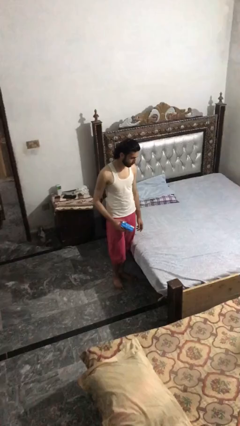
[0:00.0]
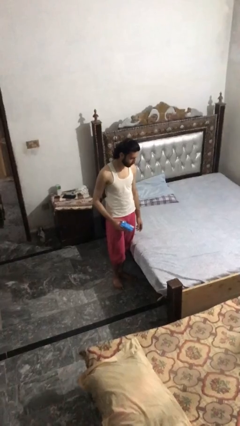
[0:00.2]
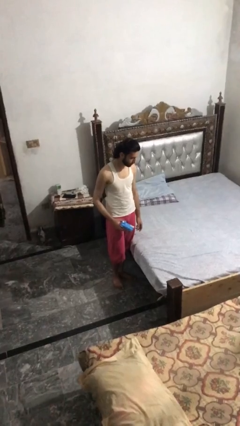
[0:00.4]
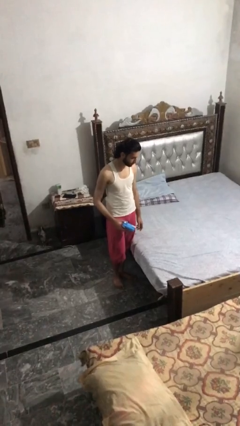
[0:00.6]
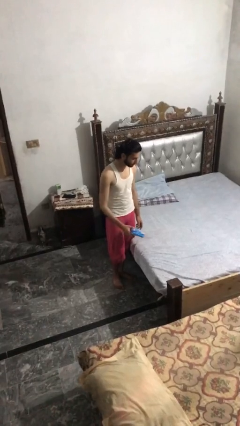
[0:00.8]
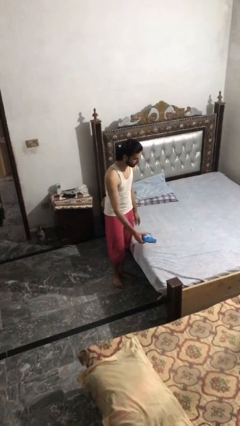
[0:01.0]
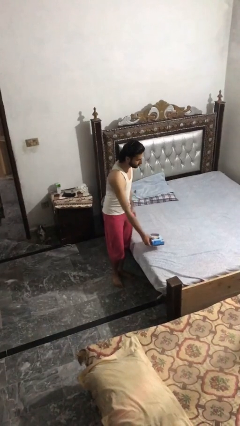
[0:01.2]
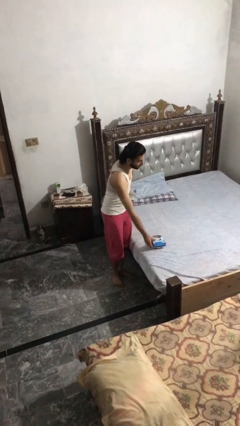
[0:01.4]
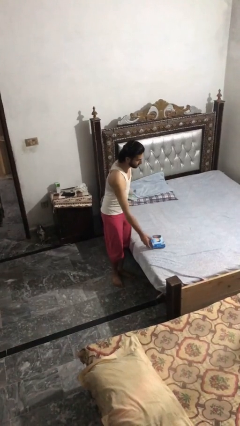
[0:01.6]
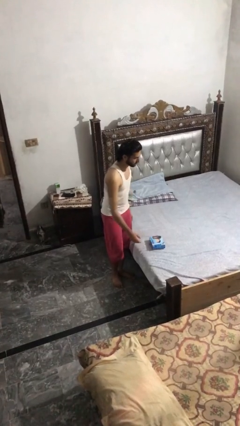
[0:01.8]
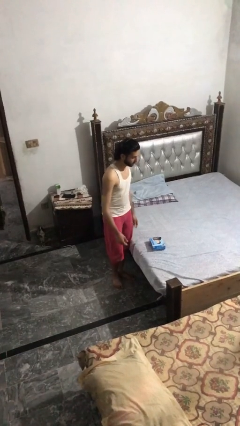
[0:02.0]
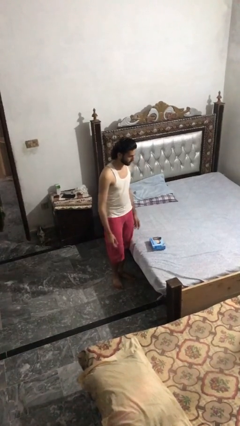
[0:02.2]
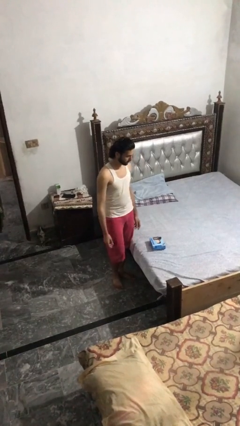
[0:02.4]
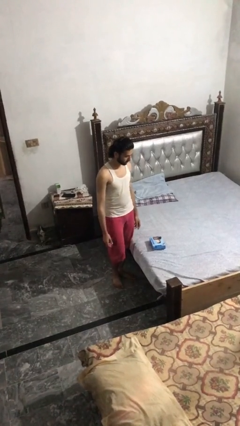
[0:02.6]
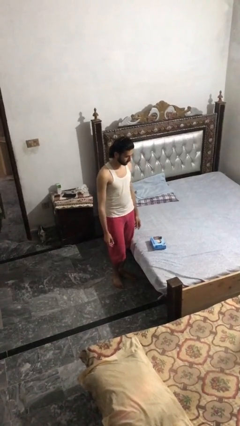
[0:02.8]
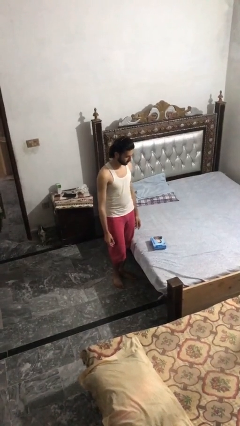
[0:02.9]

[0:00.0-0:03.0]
person puts down object on bed

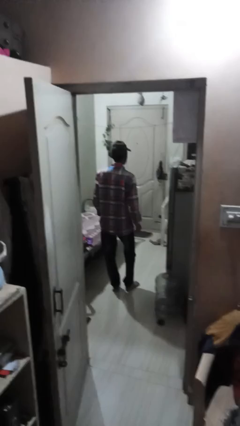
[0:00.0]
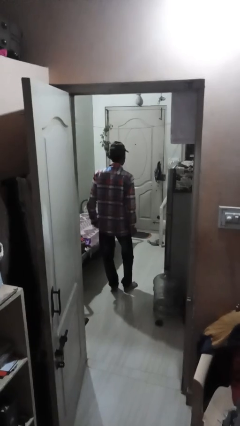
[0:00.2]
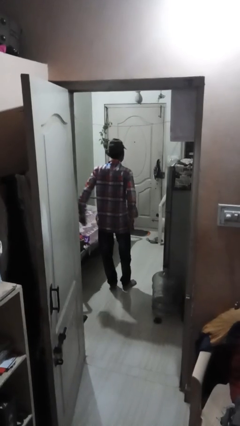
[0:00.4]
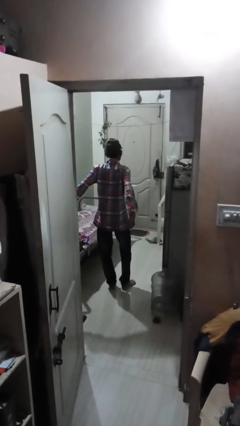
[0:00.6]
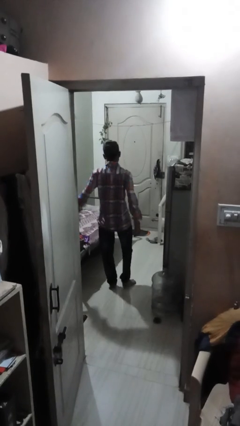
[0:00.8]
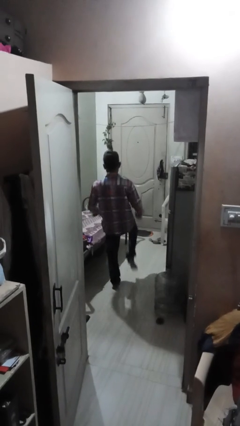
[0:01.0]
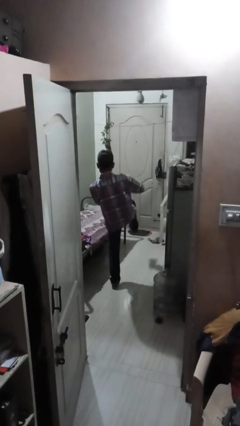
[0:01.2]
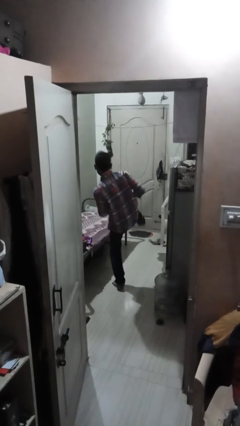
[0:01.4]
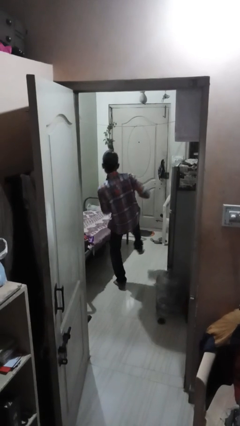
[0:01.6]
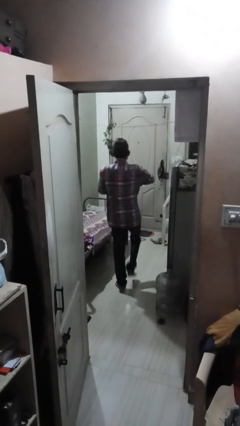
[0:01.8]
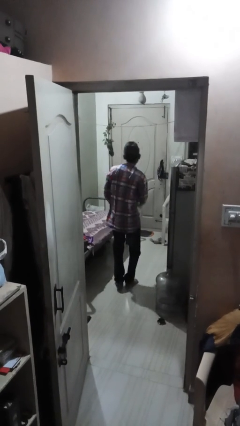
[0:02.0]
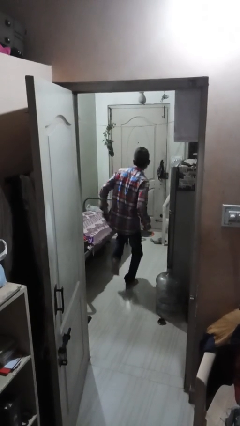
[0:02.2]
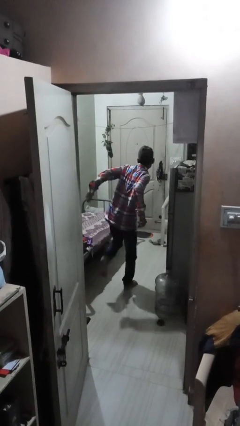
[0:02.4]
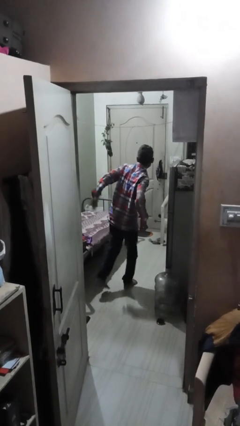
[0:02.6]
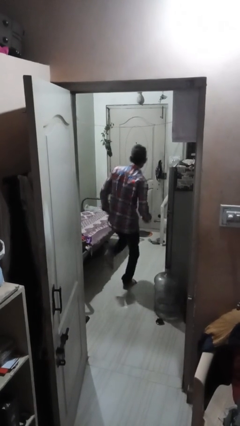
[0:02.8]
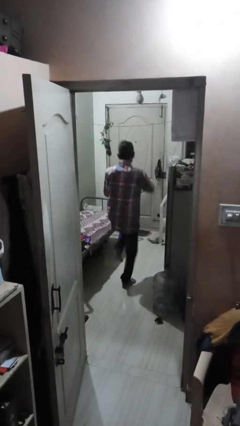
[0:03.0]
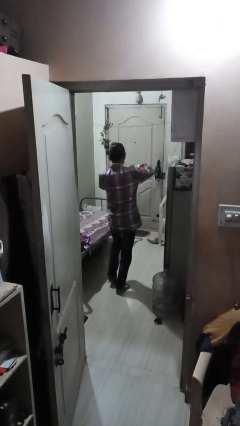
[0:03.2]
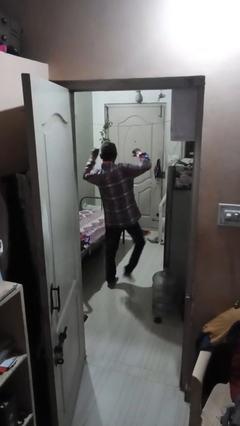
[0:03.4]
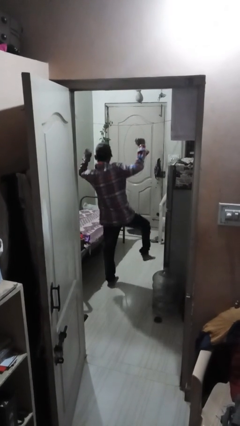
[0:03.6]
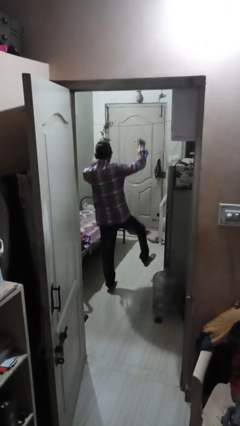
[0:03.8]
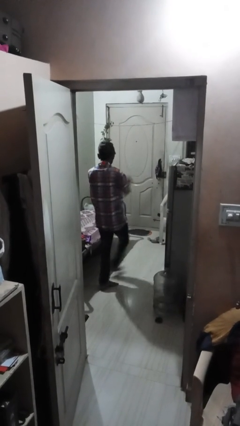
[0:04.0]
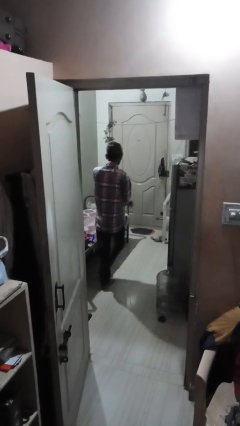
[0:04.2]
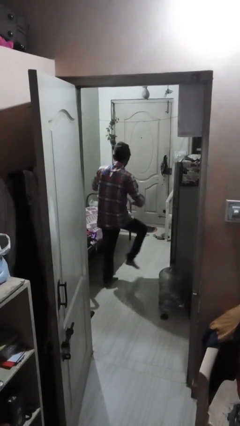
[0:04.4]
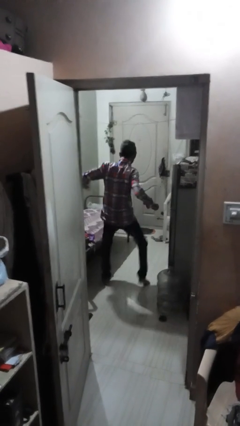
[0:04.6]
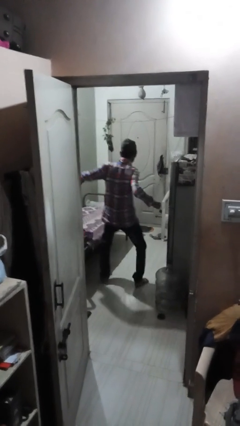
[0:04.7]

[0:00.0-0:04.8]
person dances in place

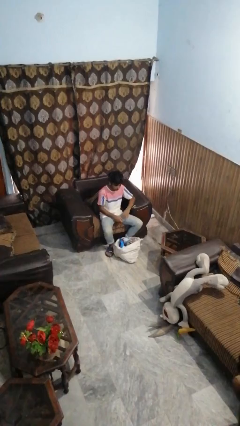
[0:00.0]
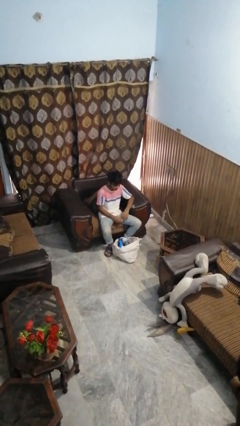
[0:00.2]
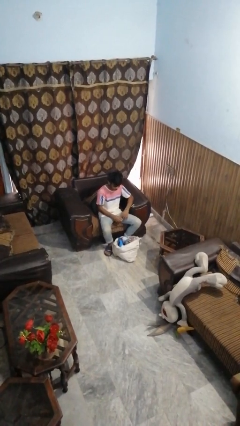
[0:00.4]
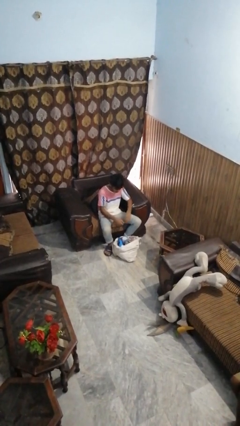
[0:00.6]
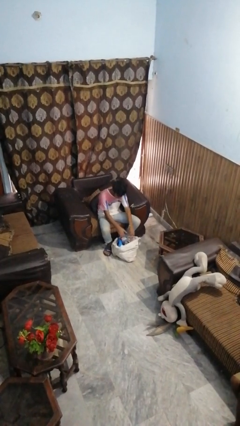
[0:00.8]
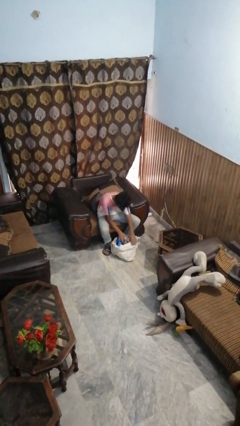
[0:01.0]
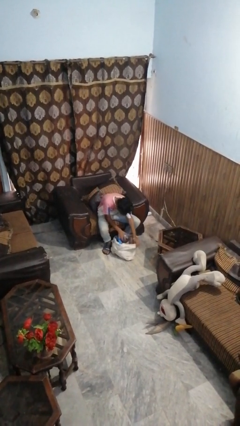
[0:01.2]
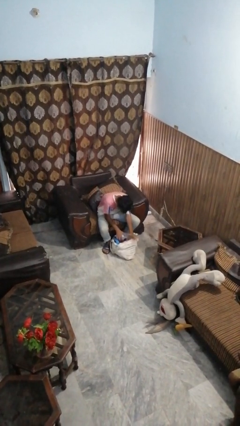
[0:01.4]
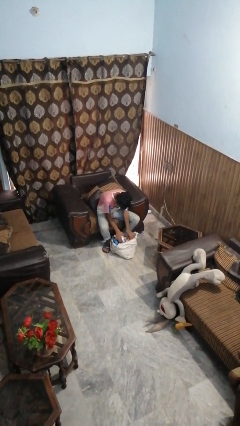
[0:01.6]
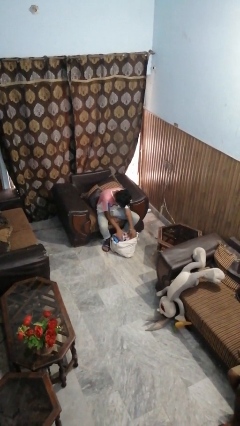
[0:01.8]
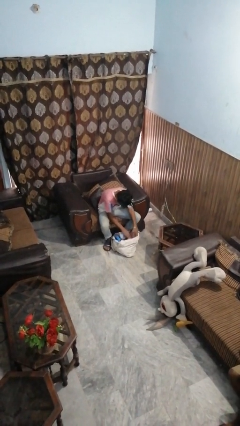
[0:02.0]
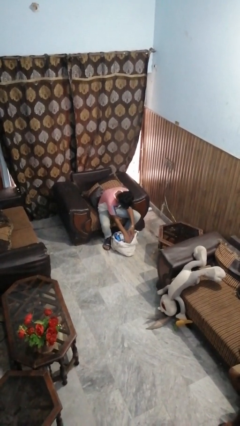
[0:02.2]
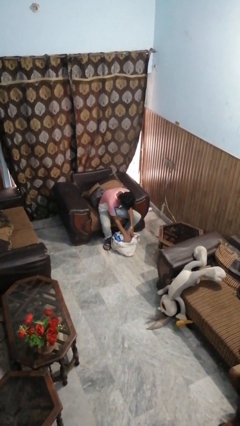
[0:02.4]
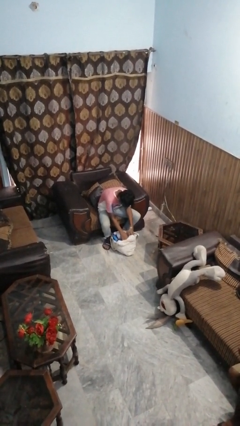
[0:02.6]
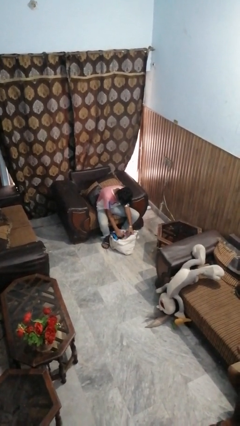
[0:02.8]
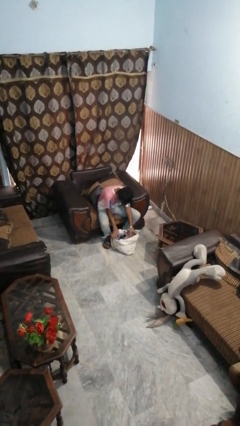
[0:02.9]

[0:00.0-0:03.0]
person searches in bag

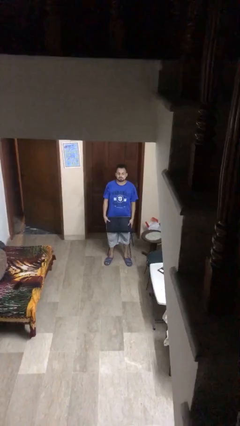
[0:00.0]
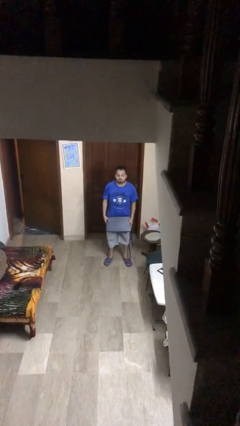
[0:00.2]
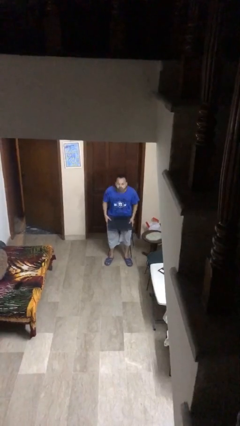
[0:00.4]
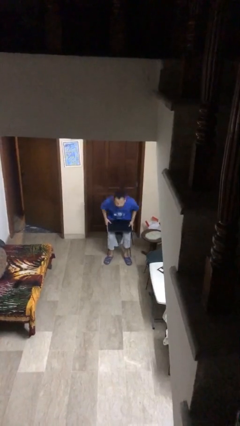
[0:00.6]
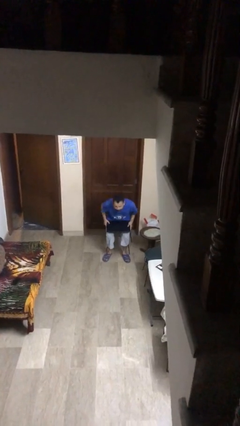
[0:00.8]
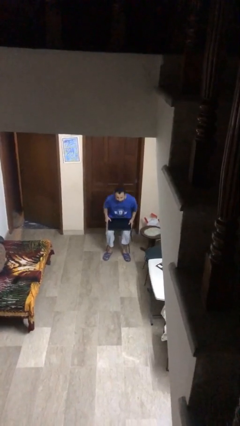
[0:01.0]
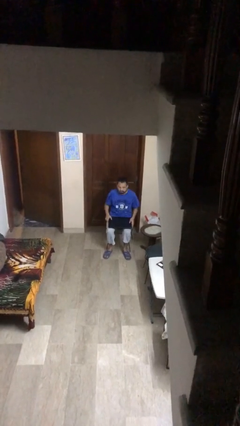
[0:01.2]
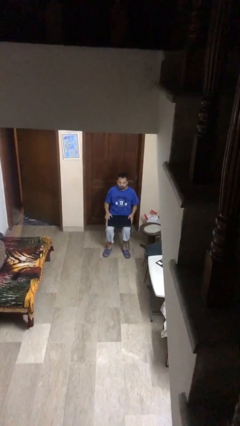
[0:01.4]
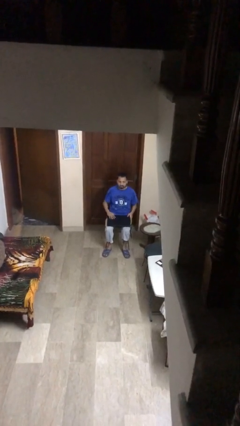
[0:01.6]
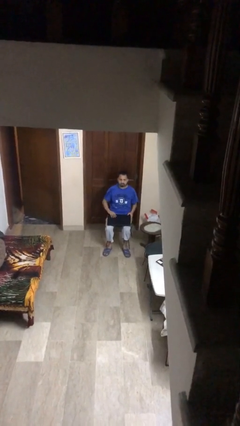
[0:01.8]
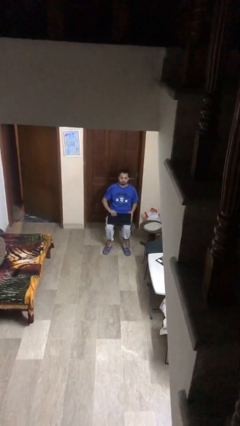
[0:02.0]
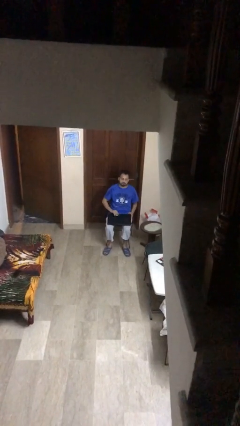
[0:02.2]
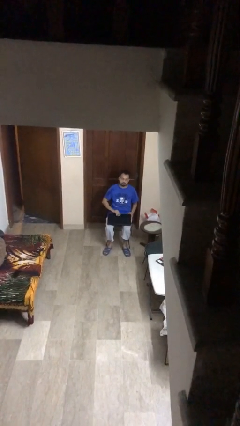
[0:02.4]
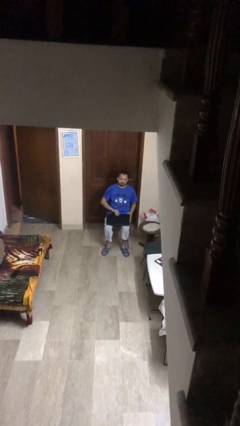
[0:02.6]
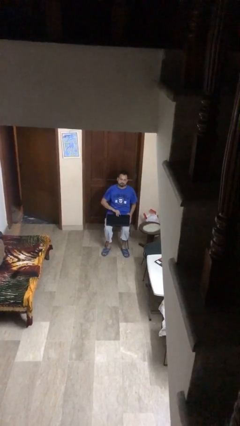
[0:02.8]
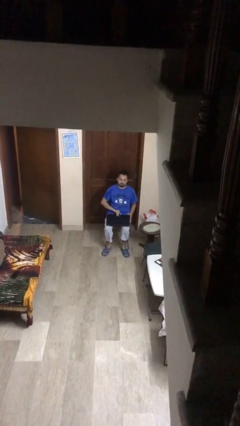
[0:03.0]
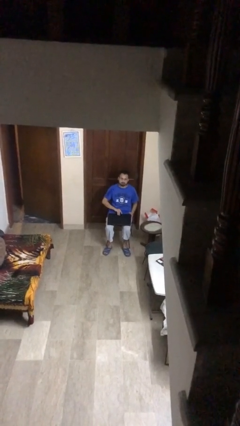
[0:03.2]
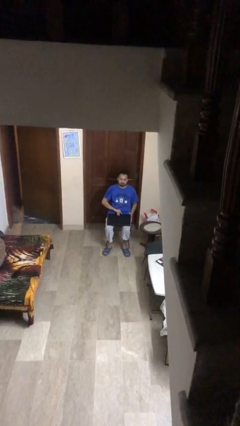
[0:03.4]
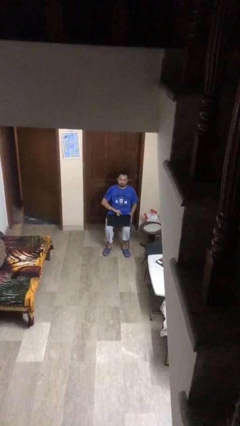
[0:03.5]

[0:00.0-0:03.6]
person sits down

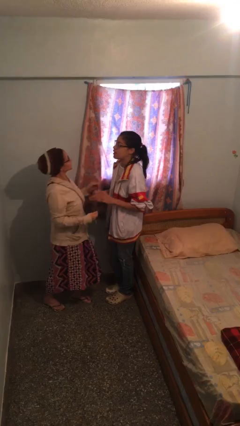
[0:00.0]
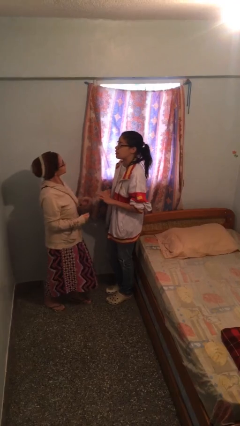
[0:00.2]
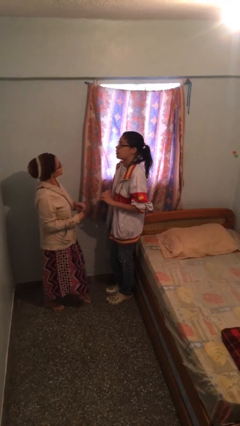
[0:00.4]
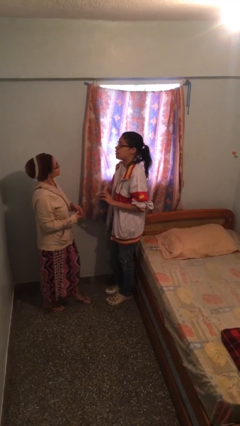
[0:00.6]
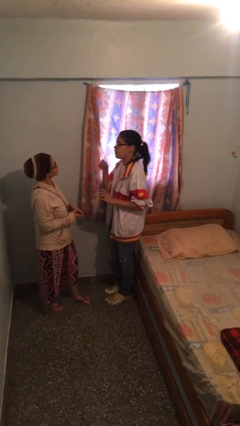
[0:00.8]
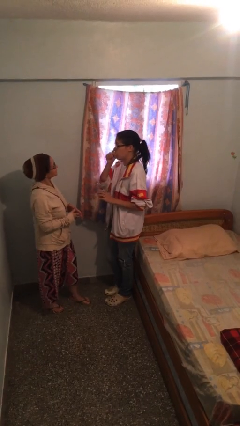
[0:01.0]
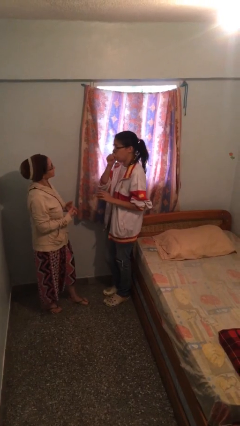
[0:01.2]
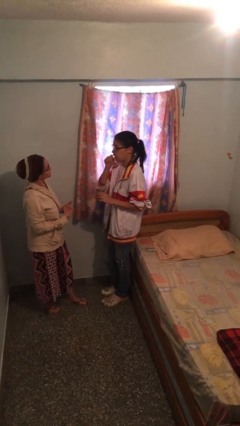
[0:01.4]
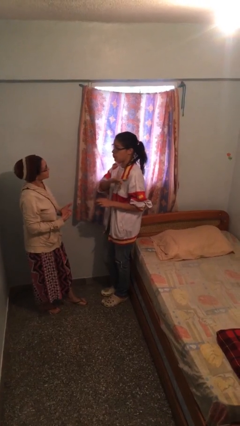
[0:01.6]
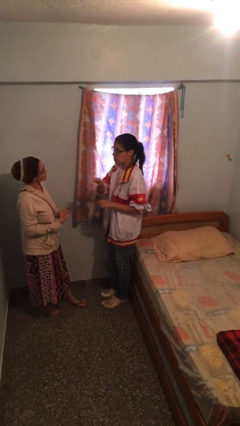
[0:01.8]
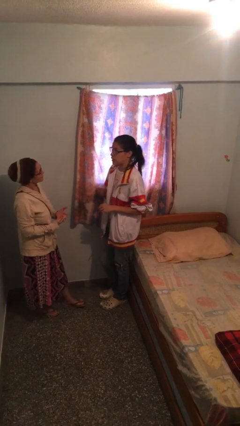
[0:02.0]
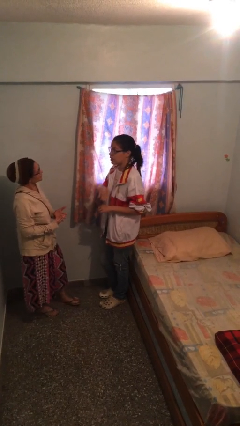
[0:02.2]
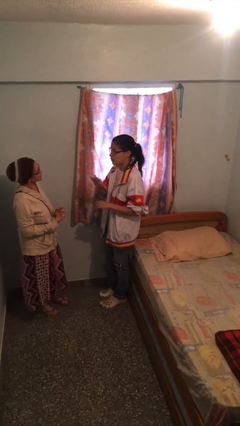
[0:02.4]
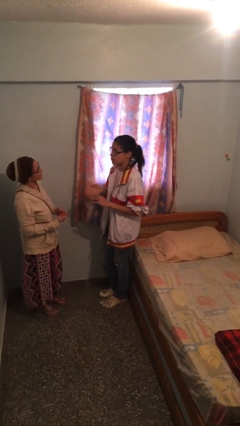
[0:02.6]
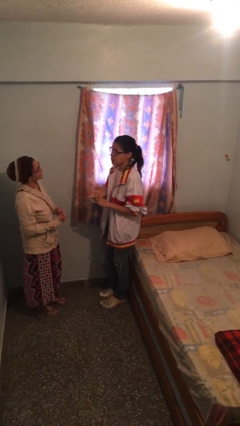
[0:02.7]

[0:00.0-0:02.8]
person talks to person

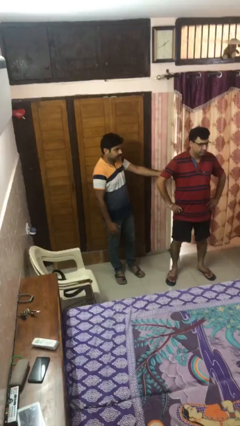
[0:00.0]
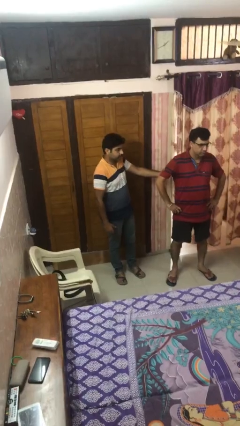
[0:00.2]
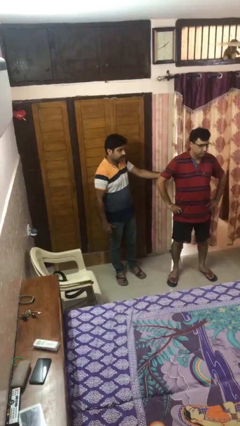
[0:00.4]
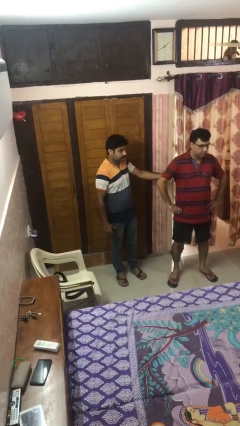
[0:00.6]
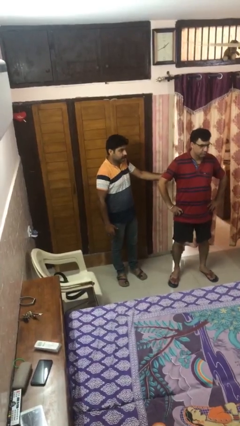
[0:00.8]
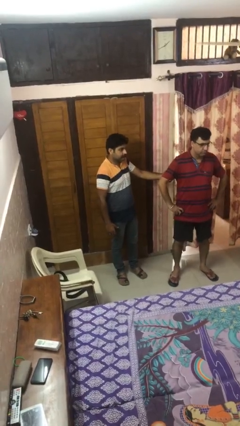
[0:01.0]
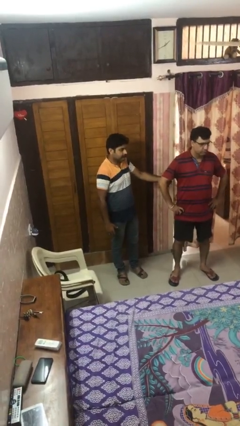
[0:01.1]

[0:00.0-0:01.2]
person grabs person by bicep
